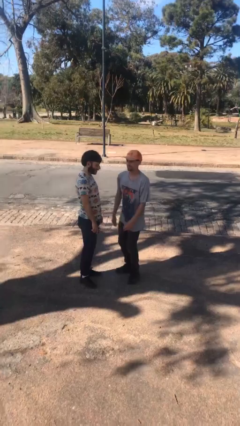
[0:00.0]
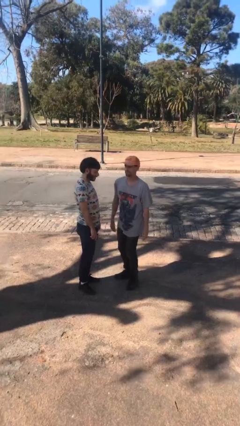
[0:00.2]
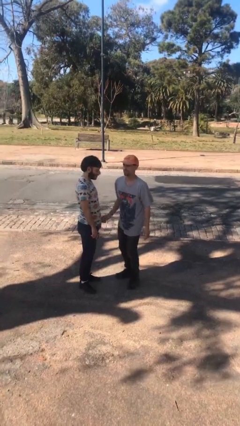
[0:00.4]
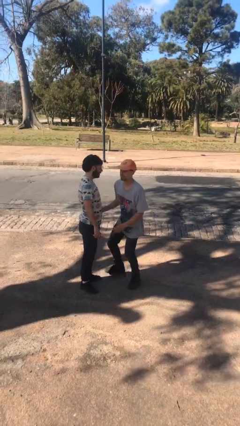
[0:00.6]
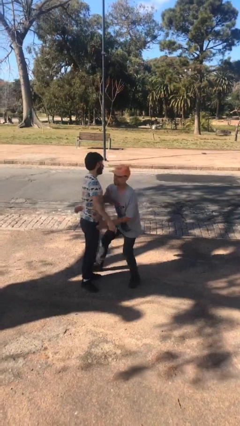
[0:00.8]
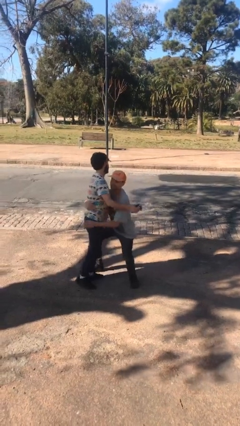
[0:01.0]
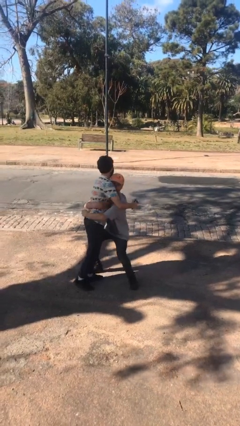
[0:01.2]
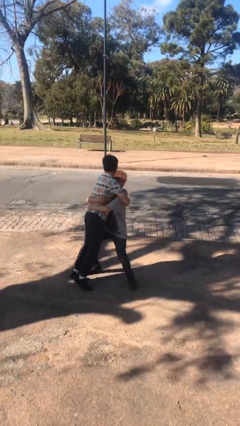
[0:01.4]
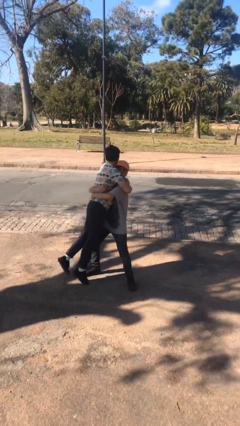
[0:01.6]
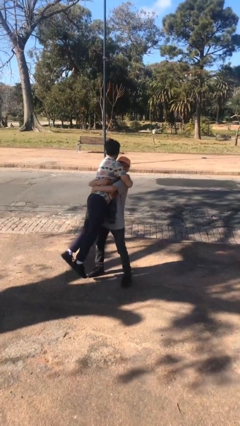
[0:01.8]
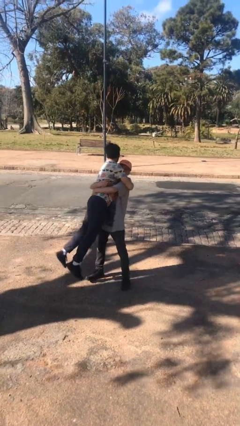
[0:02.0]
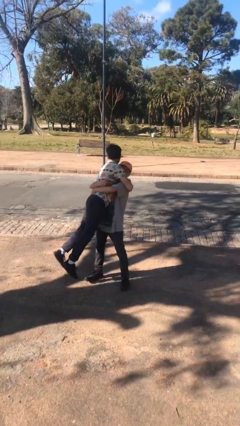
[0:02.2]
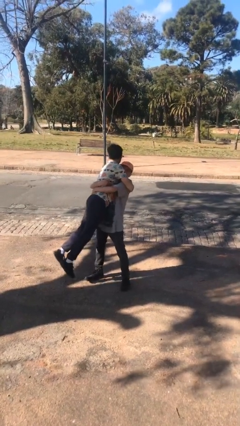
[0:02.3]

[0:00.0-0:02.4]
person picks up person

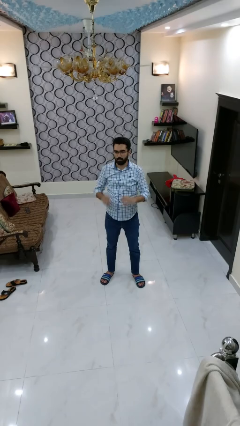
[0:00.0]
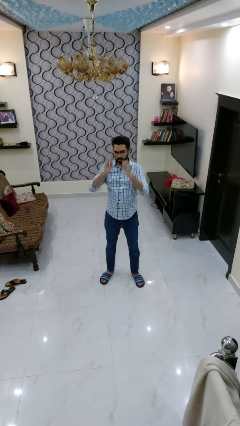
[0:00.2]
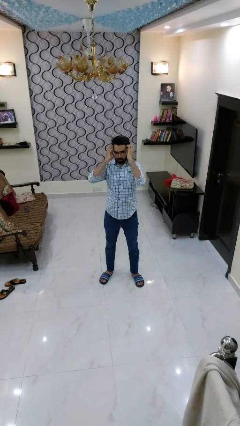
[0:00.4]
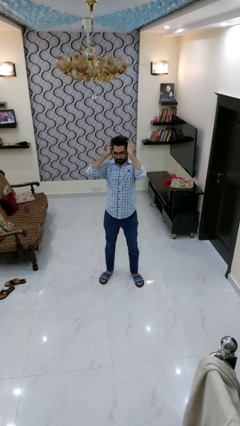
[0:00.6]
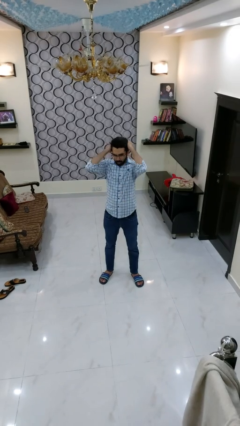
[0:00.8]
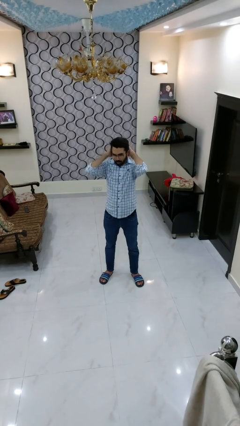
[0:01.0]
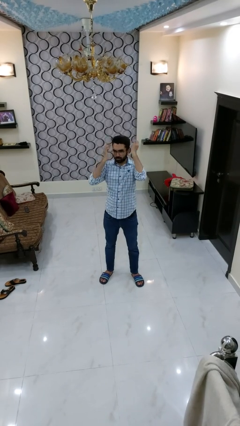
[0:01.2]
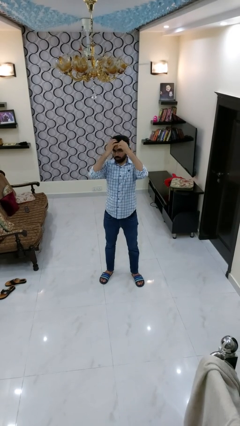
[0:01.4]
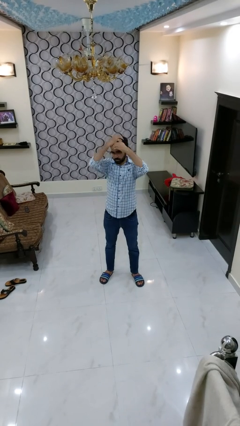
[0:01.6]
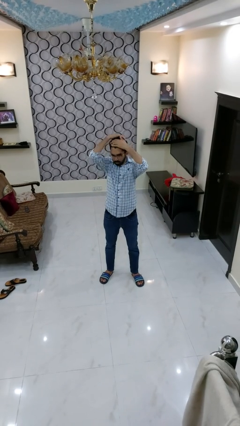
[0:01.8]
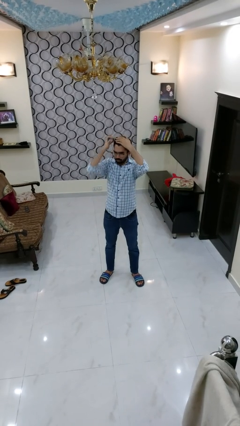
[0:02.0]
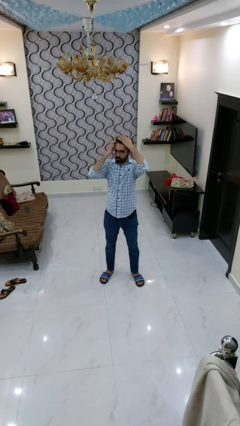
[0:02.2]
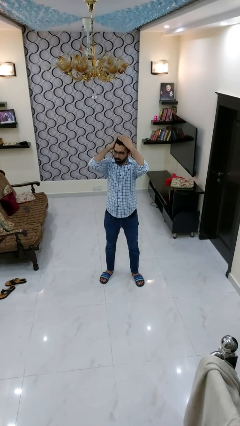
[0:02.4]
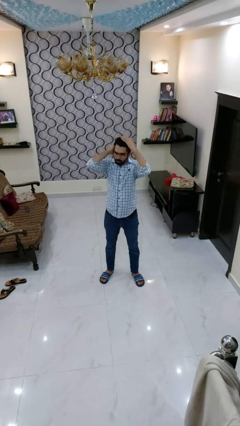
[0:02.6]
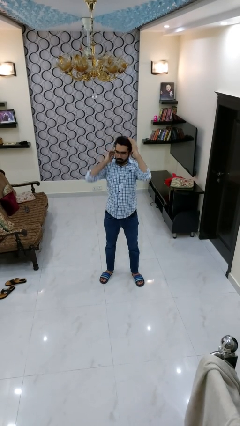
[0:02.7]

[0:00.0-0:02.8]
person strokes hair

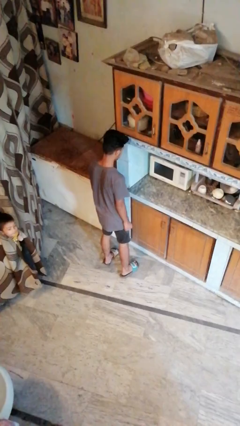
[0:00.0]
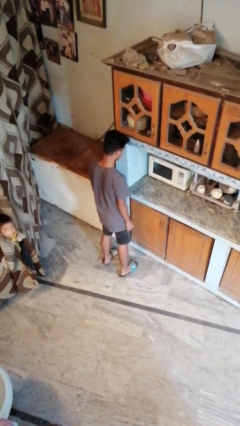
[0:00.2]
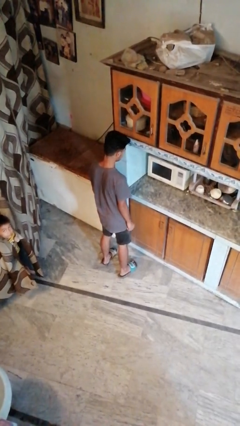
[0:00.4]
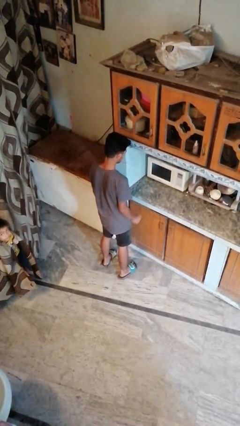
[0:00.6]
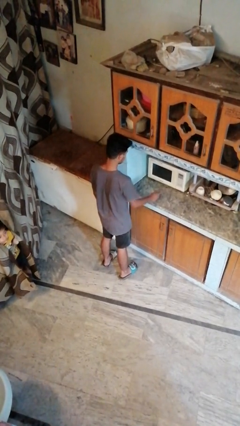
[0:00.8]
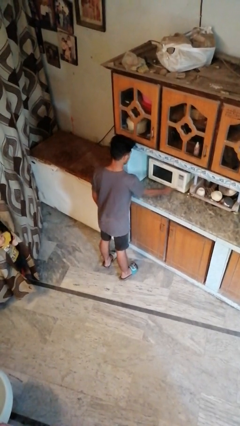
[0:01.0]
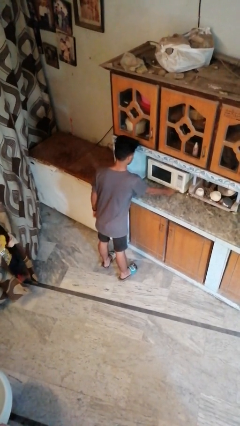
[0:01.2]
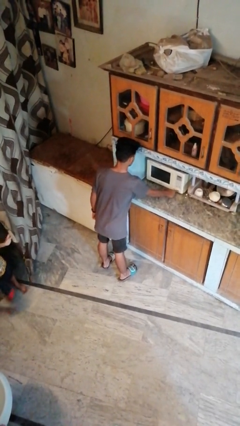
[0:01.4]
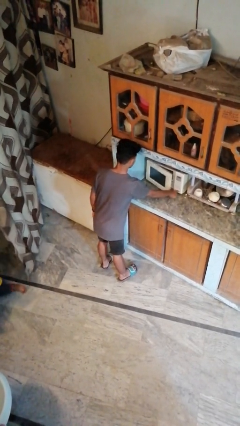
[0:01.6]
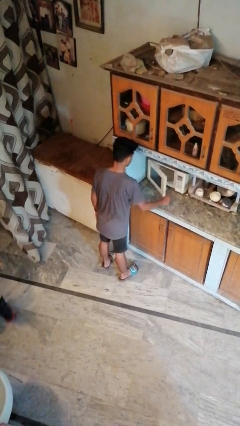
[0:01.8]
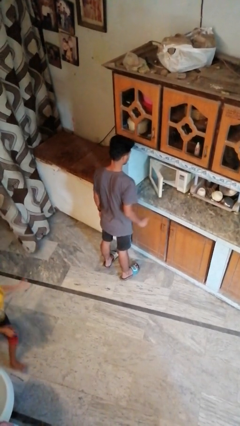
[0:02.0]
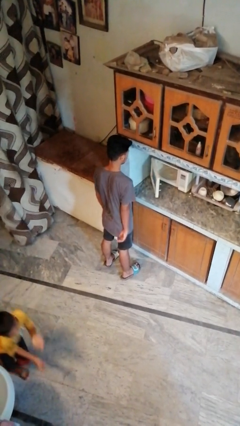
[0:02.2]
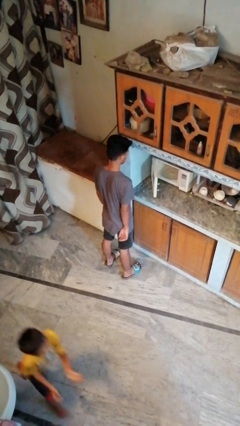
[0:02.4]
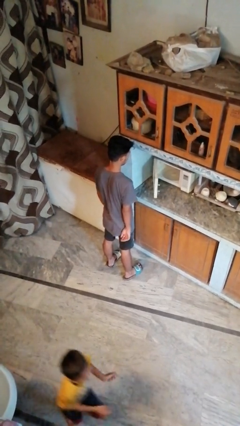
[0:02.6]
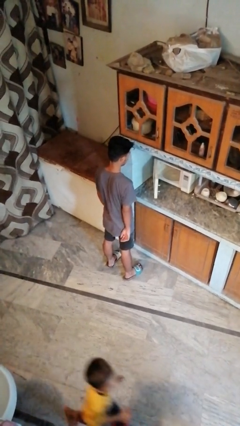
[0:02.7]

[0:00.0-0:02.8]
person opens oven door

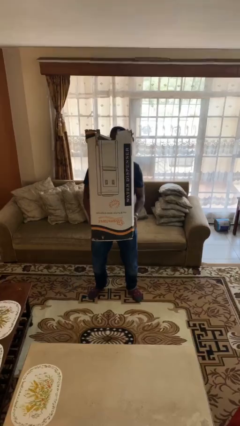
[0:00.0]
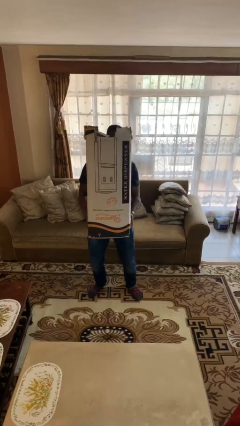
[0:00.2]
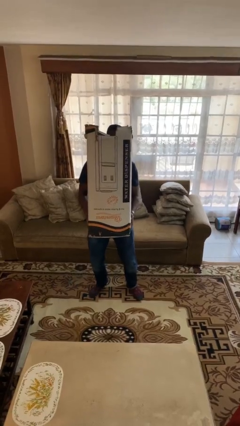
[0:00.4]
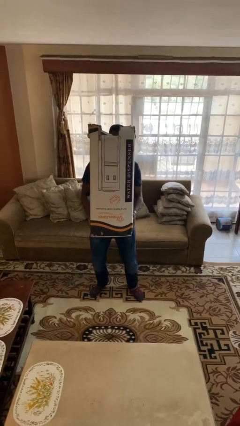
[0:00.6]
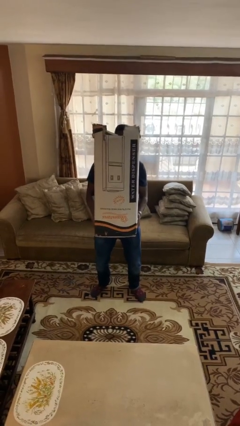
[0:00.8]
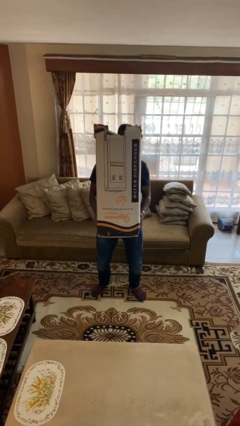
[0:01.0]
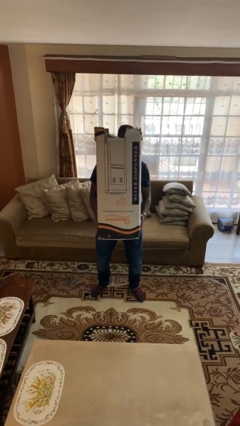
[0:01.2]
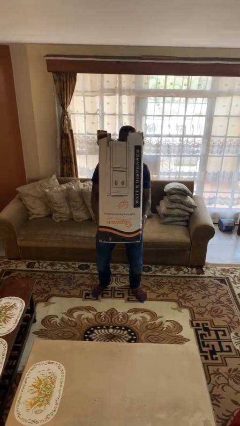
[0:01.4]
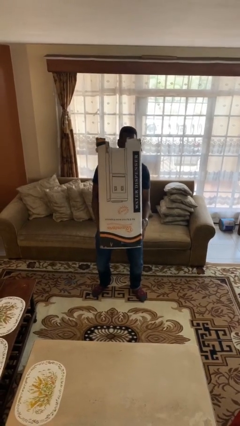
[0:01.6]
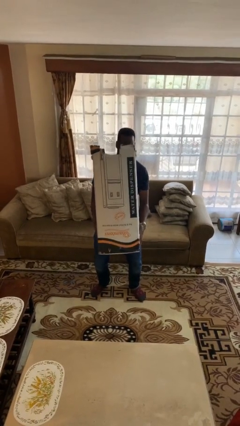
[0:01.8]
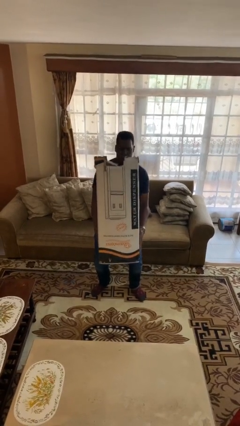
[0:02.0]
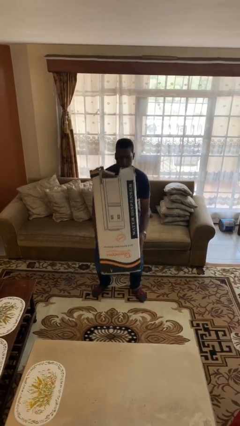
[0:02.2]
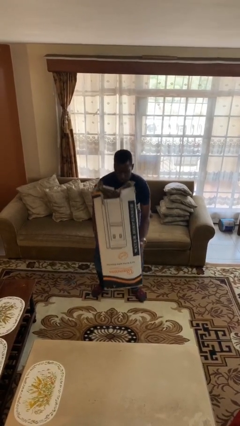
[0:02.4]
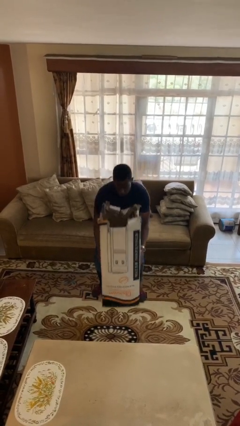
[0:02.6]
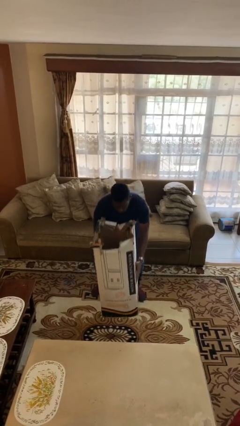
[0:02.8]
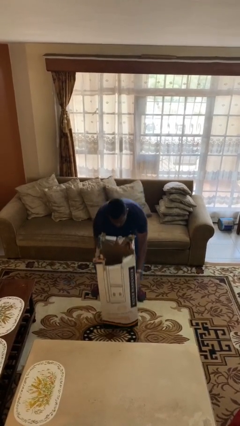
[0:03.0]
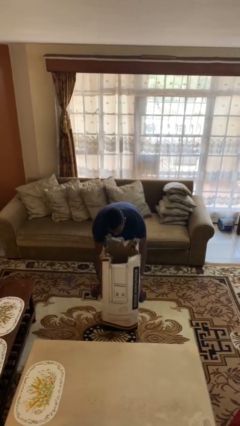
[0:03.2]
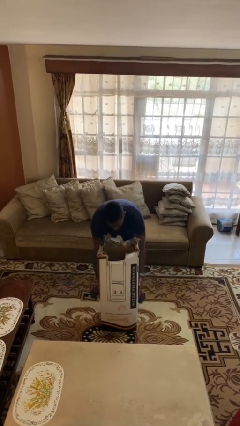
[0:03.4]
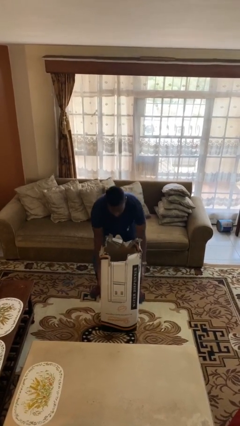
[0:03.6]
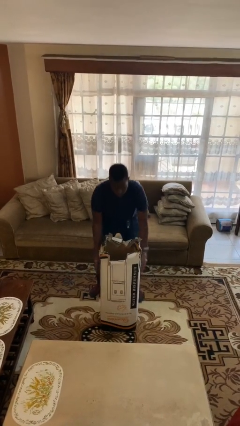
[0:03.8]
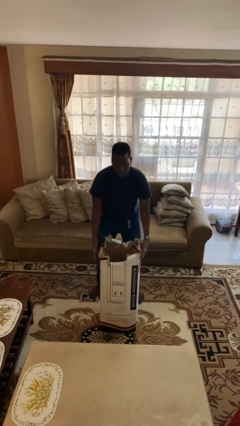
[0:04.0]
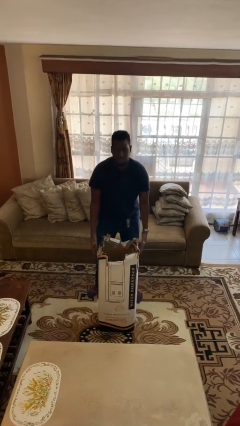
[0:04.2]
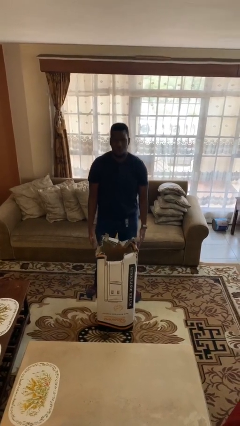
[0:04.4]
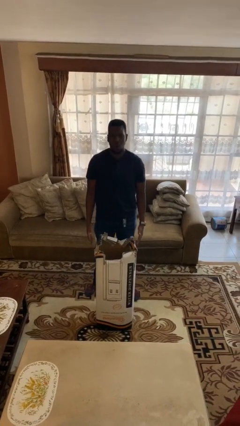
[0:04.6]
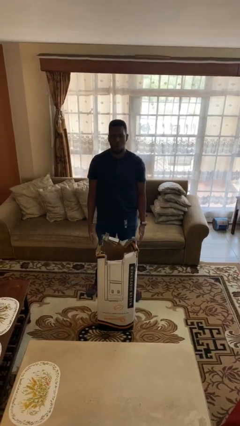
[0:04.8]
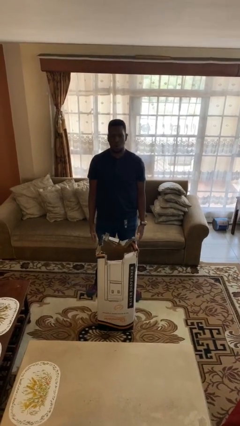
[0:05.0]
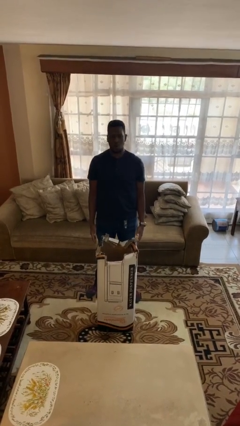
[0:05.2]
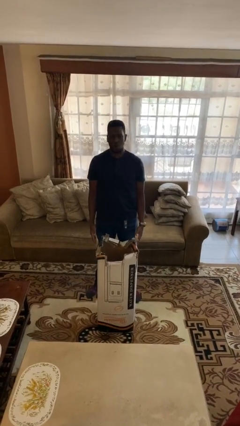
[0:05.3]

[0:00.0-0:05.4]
person puts down object on floor

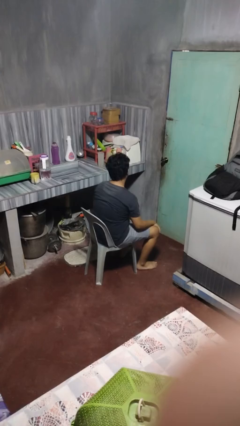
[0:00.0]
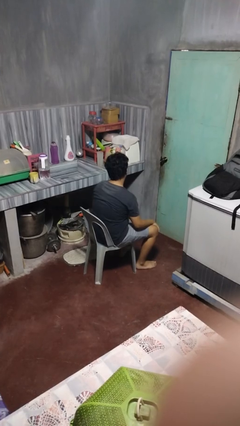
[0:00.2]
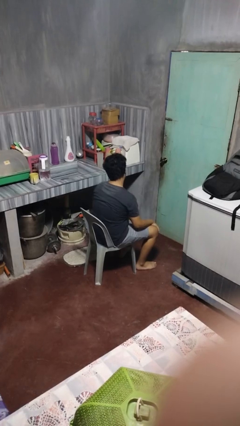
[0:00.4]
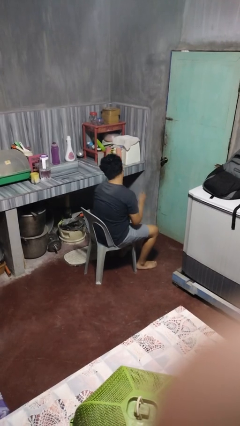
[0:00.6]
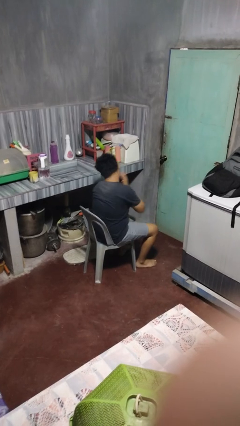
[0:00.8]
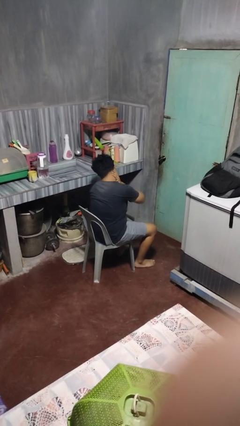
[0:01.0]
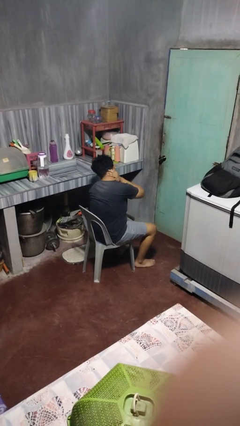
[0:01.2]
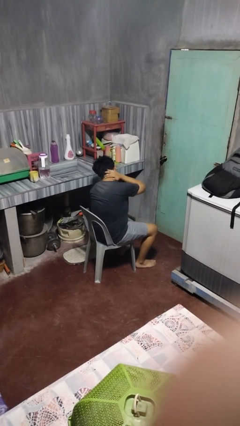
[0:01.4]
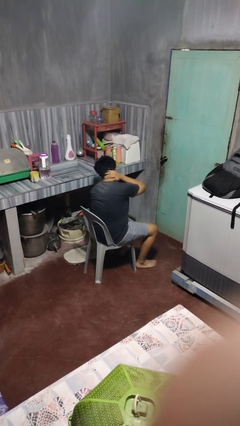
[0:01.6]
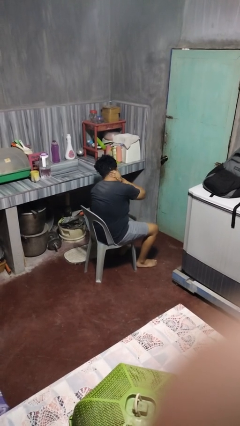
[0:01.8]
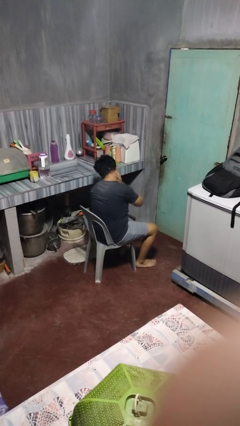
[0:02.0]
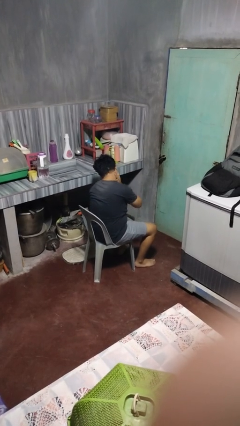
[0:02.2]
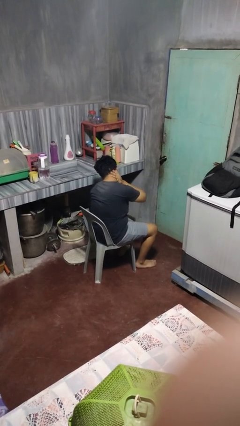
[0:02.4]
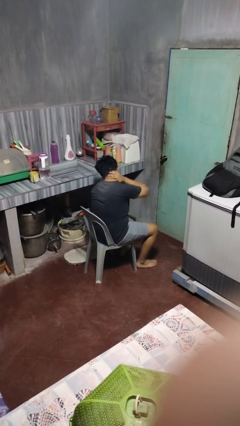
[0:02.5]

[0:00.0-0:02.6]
person rubs neck

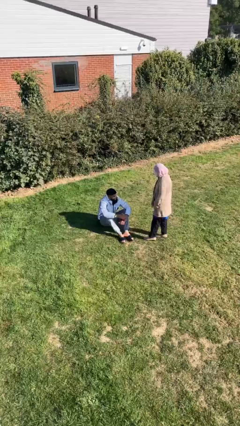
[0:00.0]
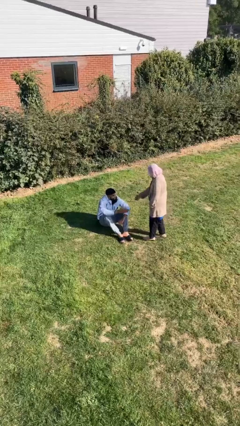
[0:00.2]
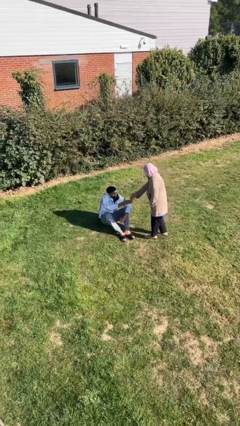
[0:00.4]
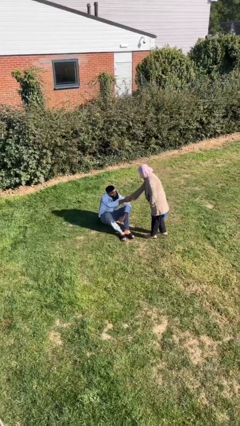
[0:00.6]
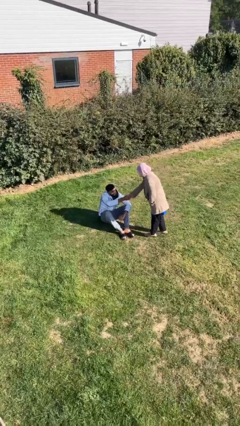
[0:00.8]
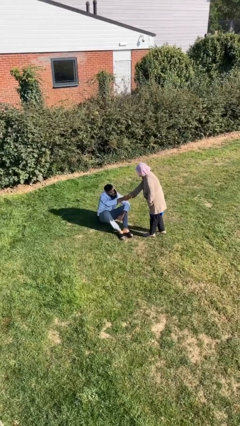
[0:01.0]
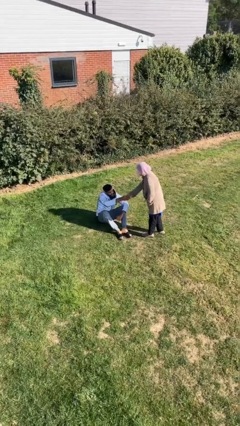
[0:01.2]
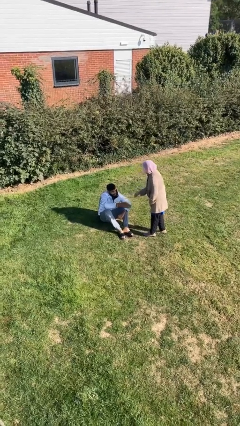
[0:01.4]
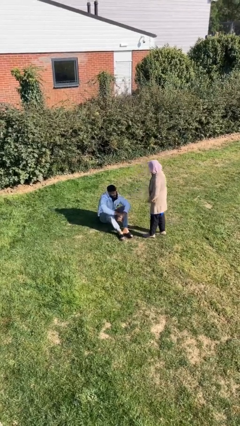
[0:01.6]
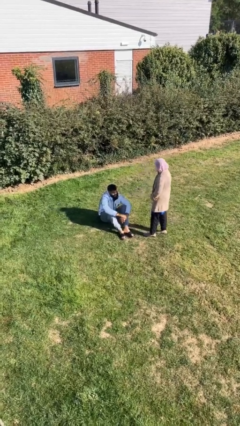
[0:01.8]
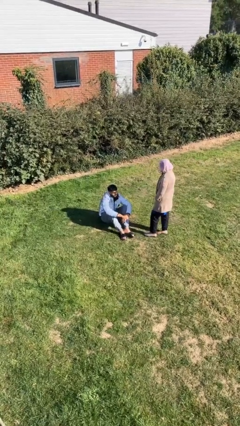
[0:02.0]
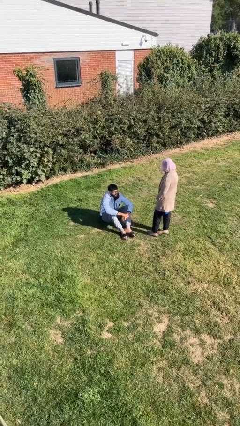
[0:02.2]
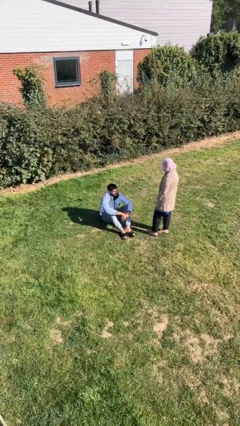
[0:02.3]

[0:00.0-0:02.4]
person shakes hand
